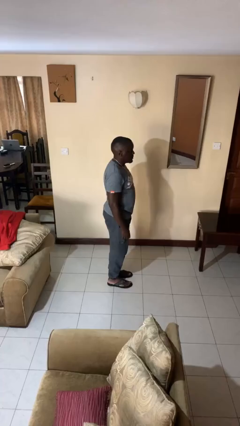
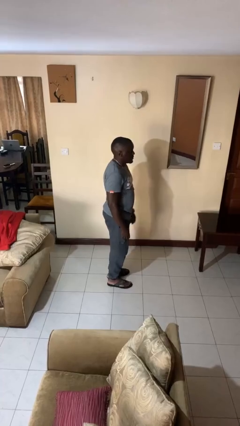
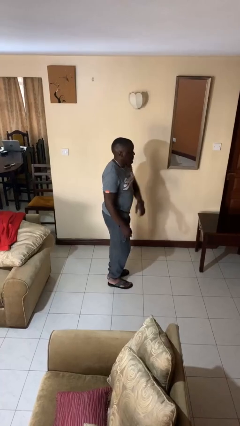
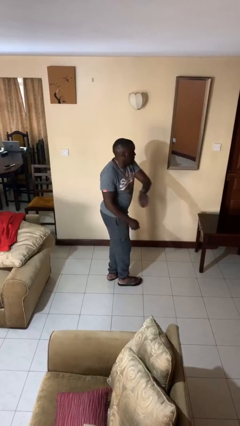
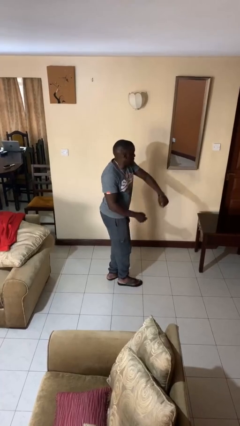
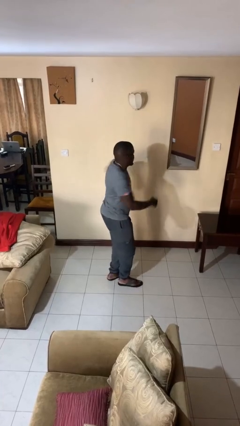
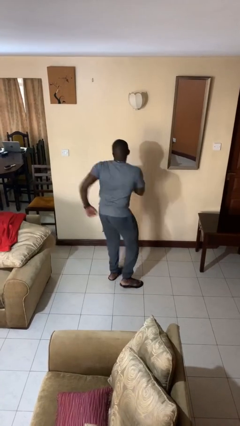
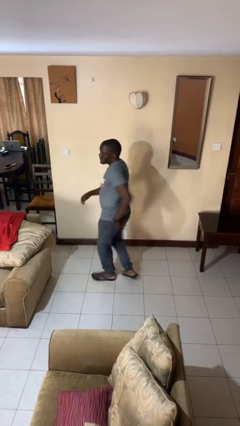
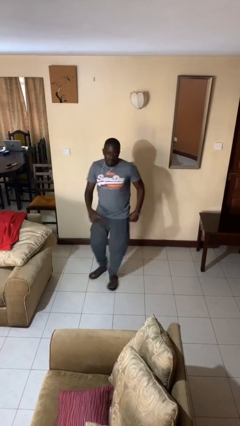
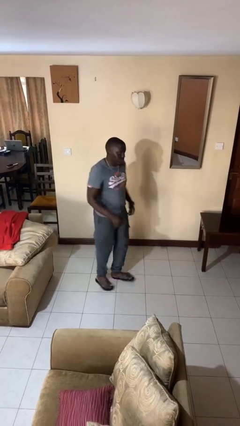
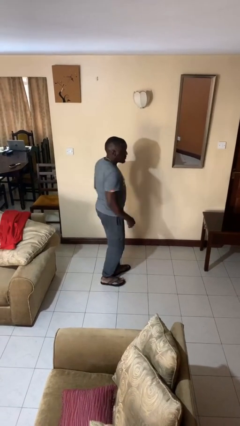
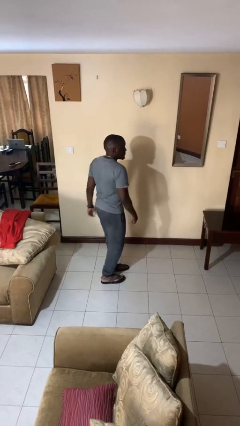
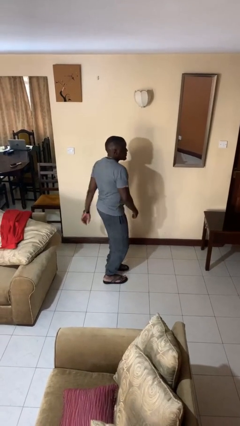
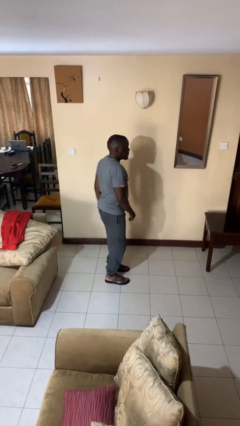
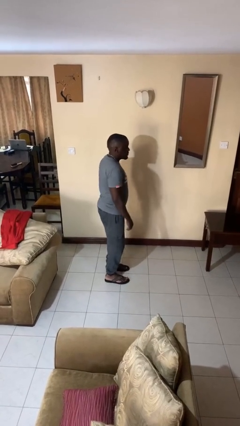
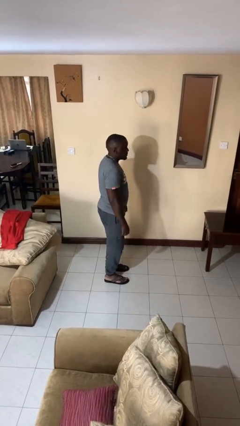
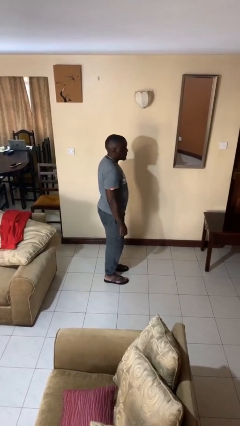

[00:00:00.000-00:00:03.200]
person twirls

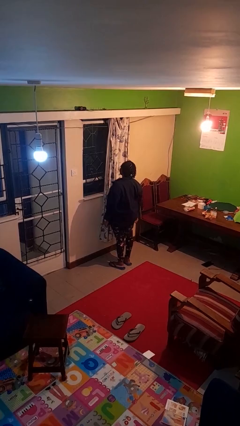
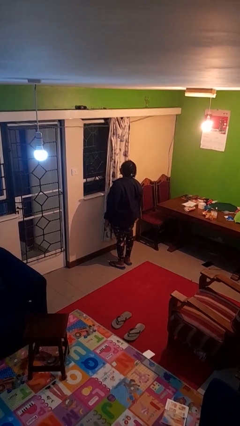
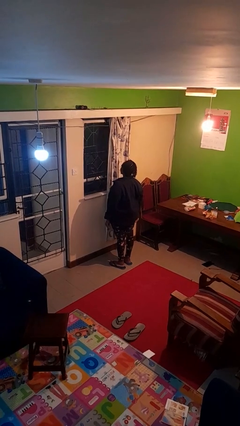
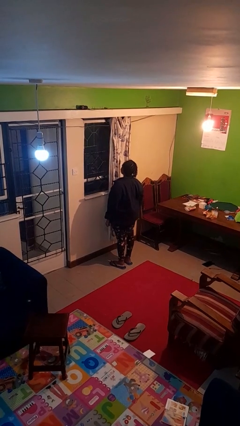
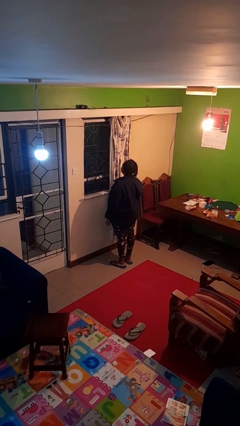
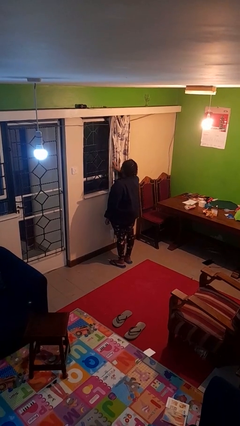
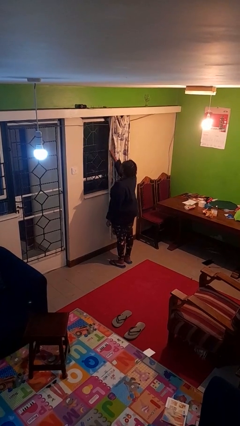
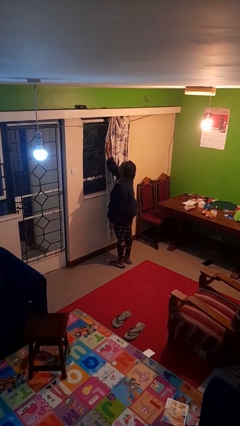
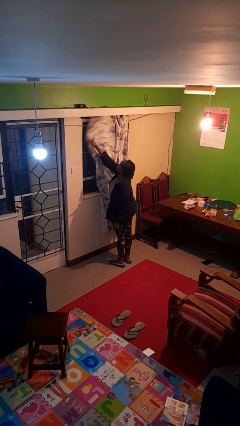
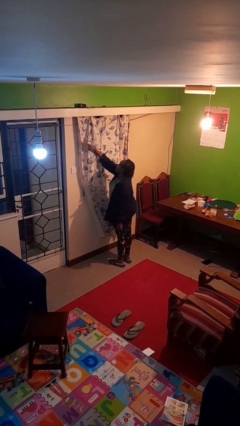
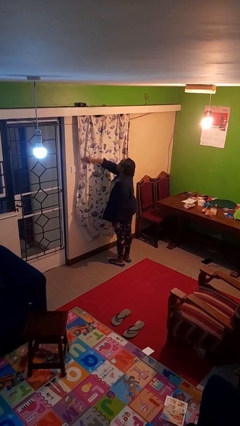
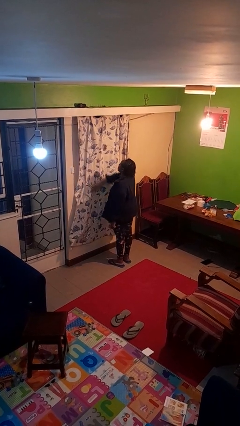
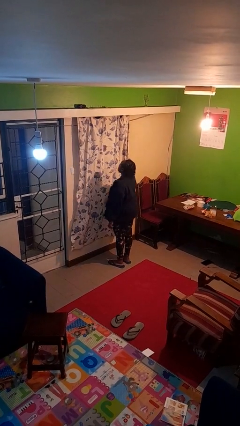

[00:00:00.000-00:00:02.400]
person closes curtains

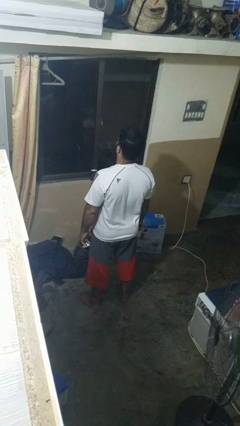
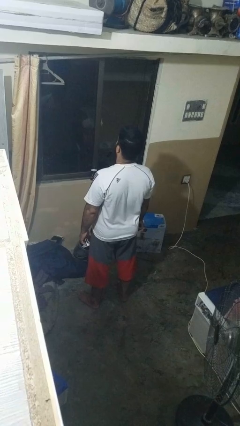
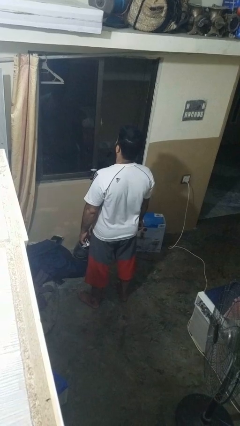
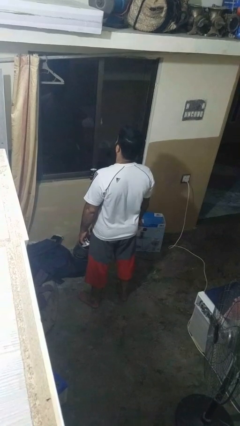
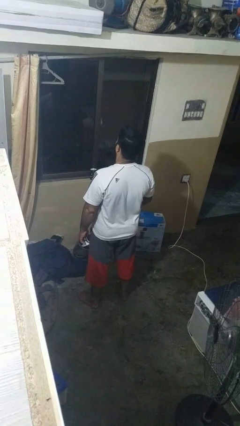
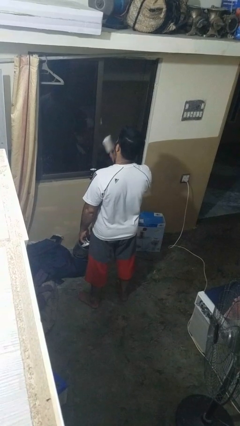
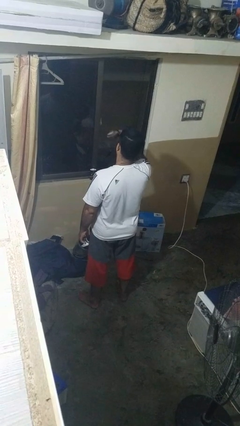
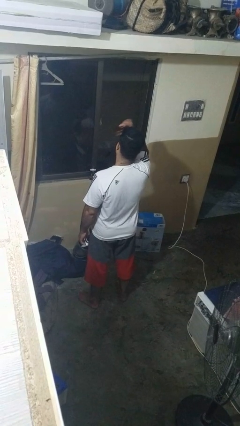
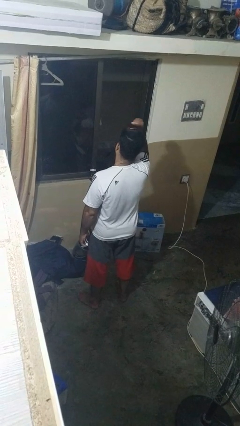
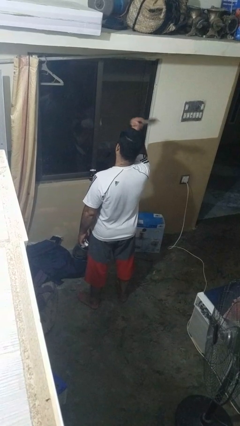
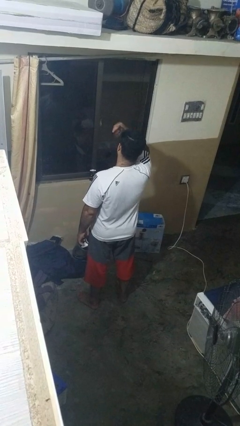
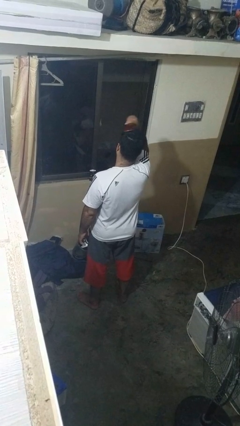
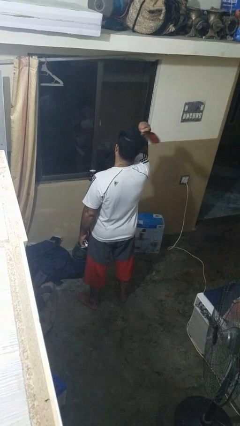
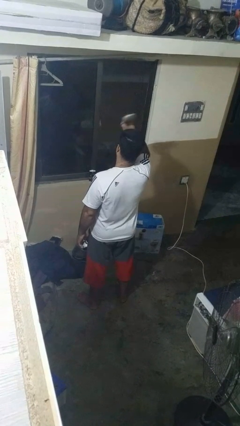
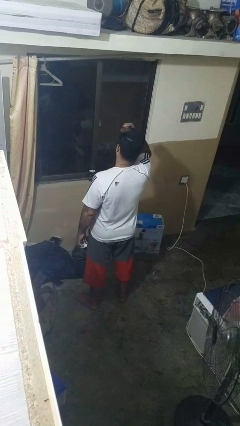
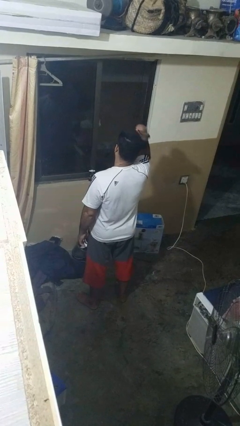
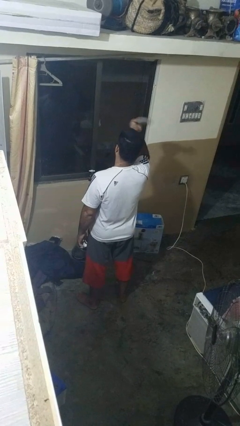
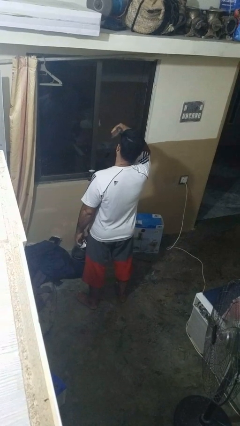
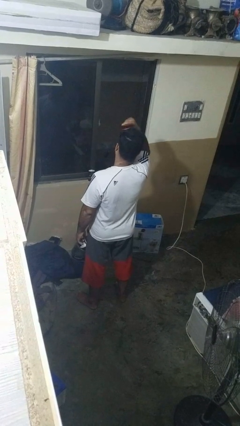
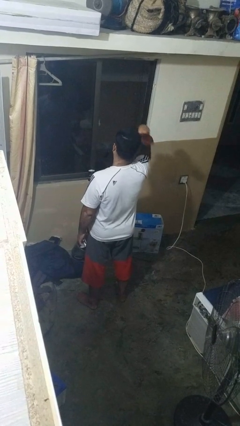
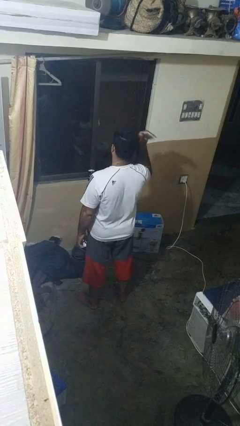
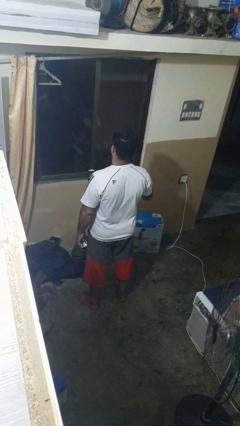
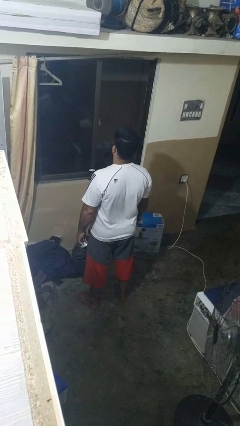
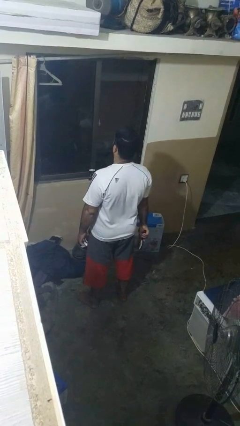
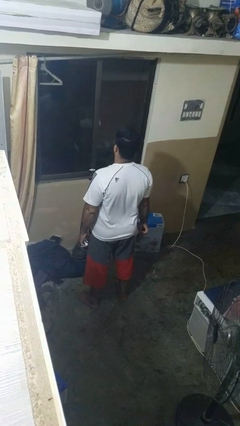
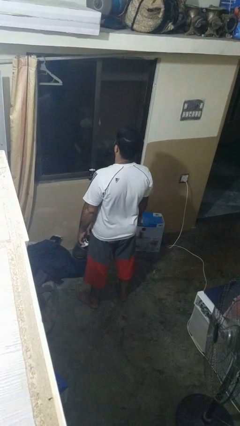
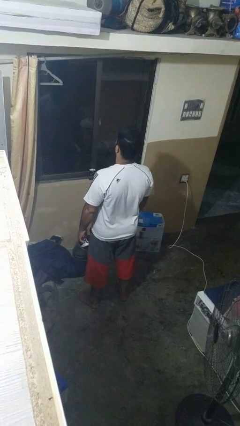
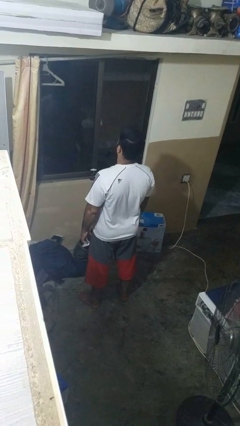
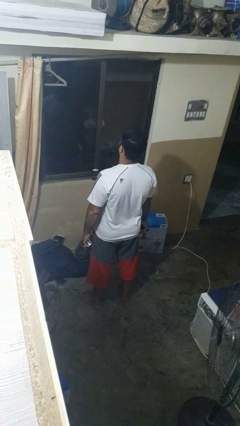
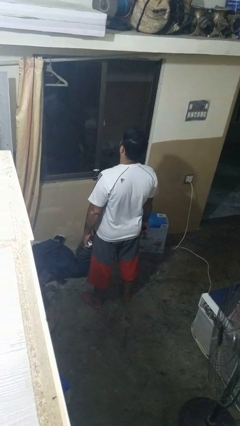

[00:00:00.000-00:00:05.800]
person brushes hair

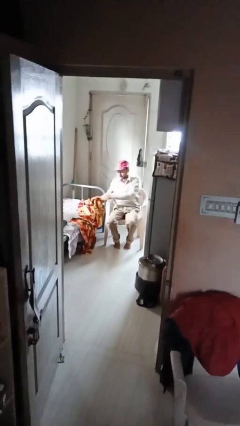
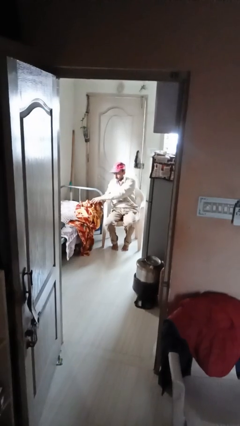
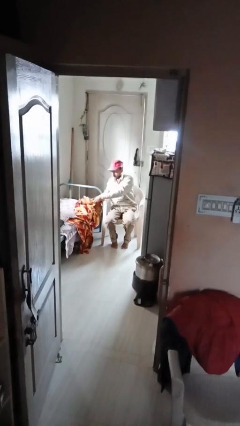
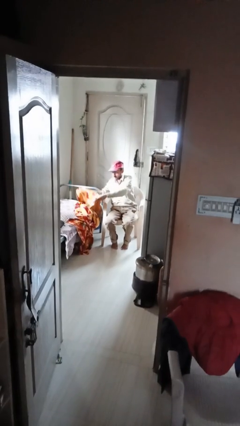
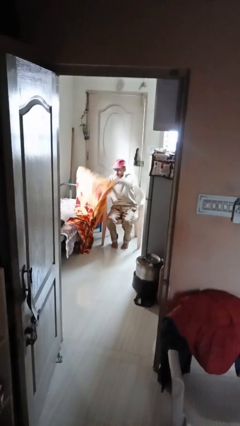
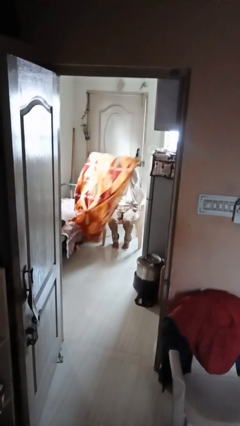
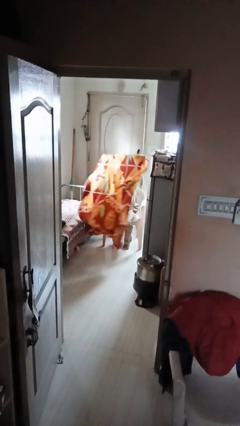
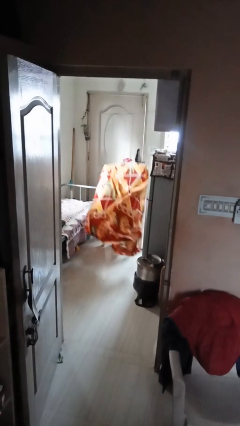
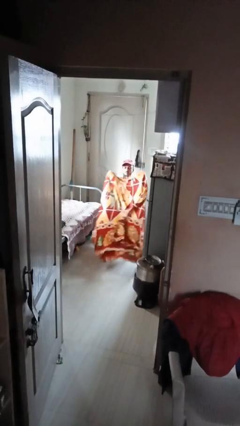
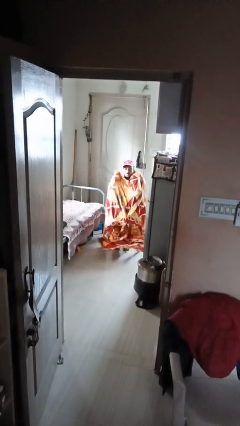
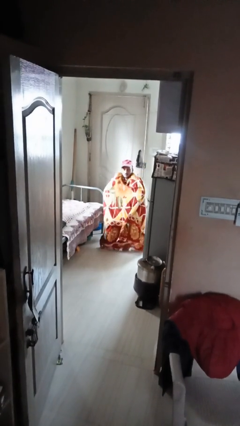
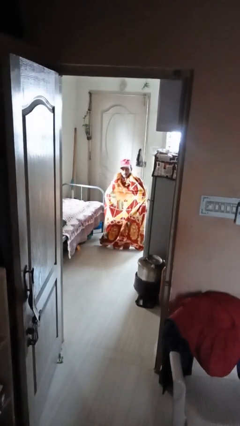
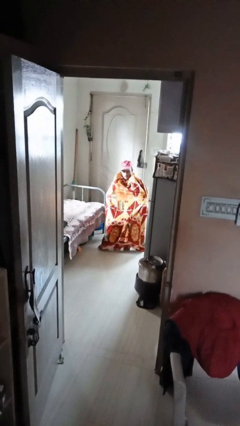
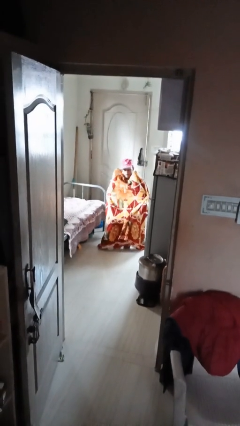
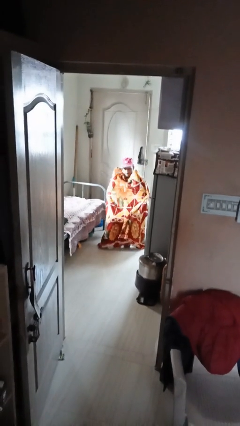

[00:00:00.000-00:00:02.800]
person covers with blanket

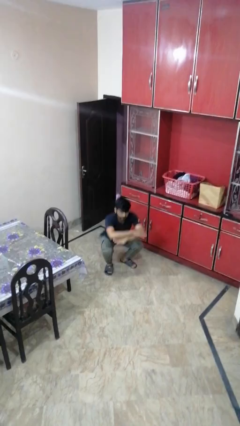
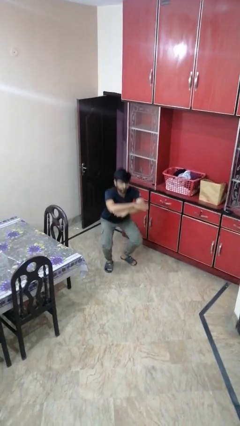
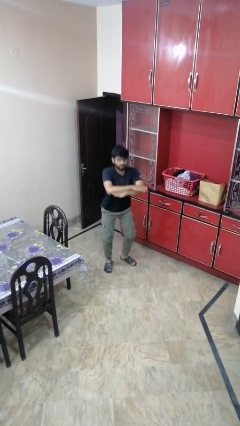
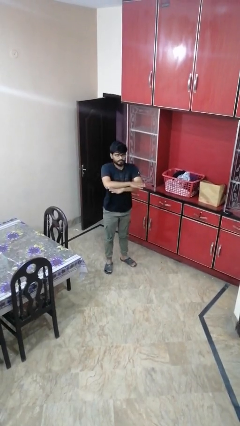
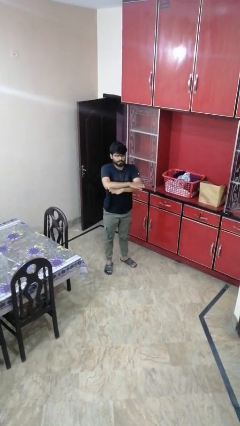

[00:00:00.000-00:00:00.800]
person stands up

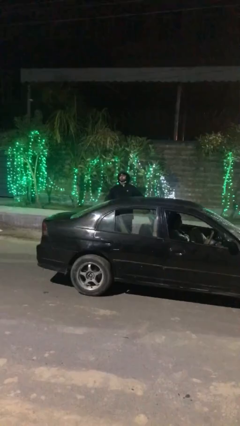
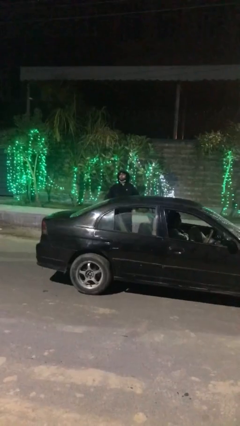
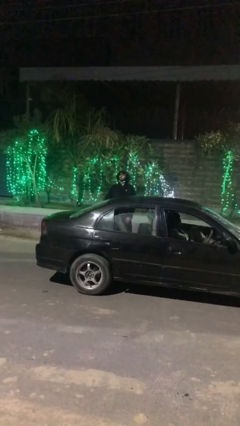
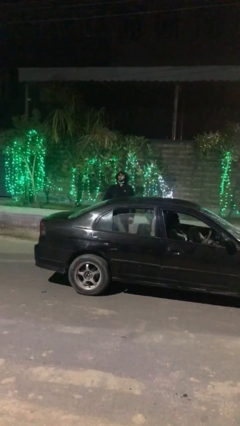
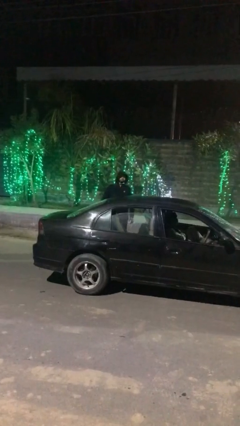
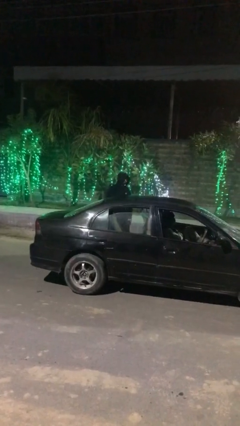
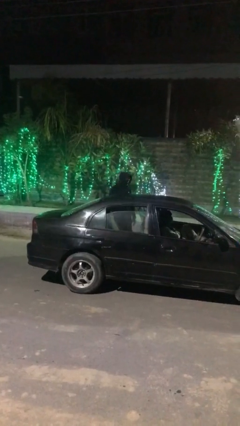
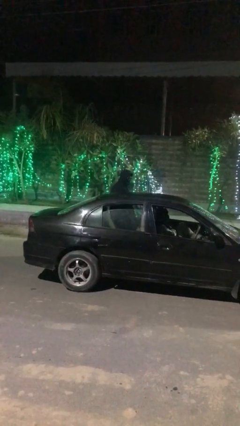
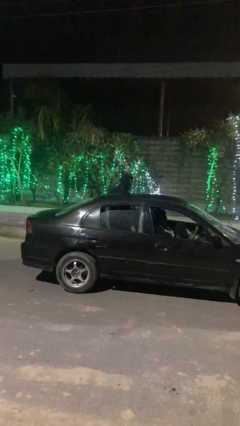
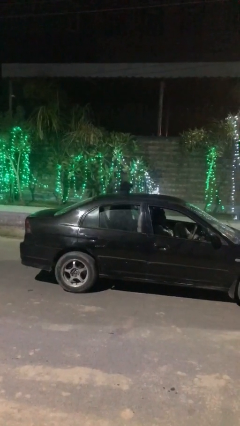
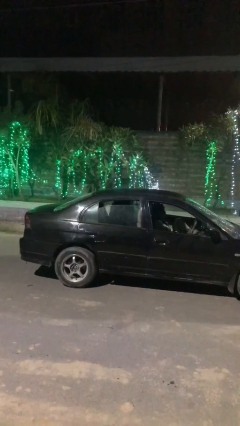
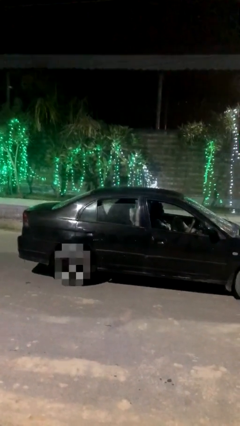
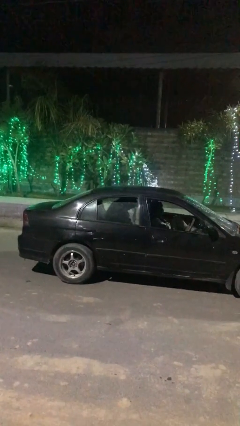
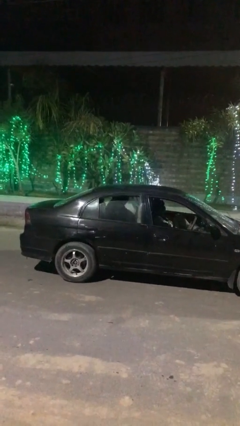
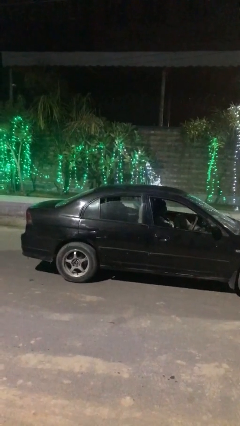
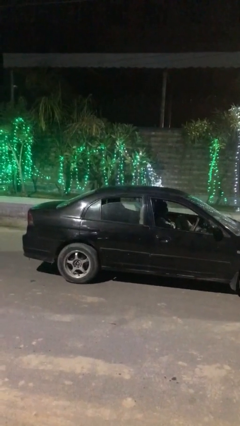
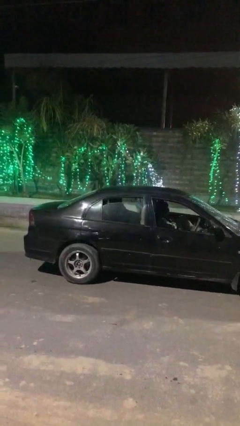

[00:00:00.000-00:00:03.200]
person enters car
